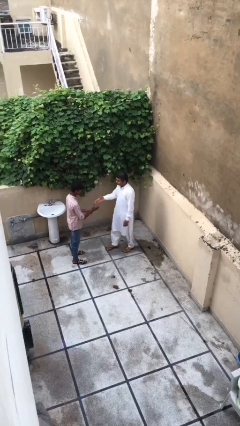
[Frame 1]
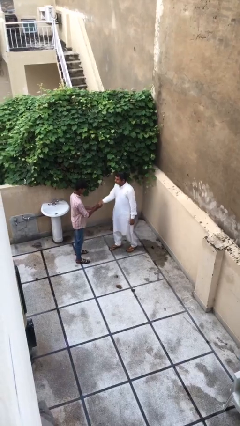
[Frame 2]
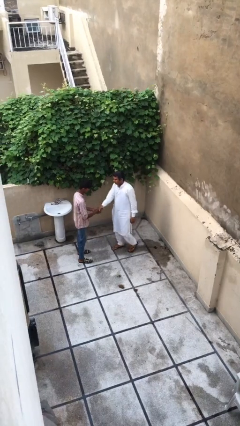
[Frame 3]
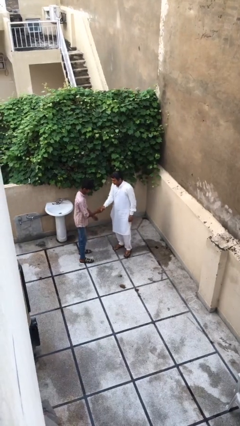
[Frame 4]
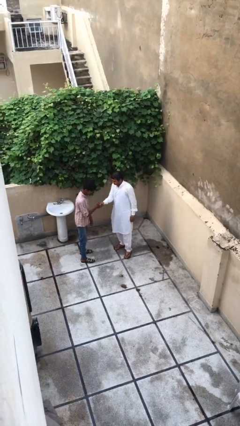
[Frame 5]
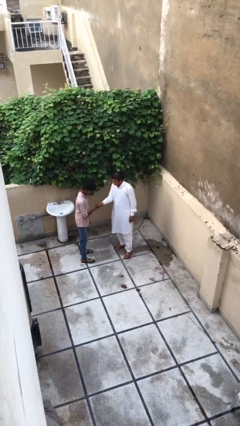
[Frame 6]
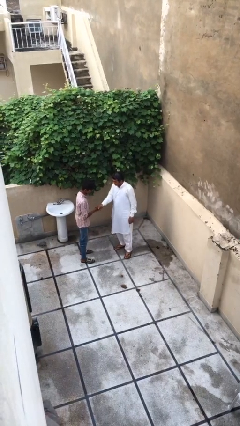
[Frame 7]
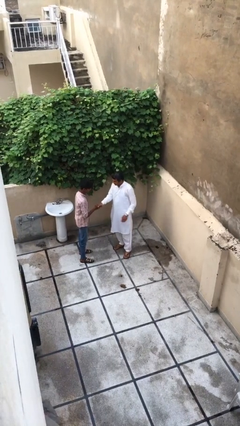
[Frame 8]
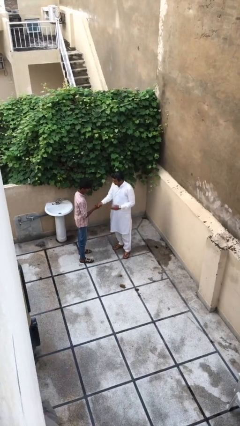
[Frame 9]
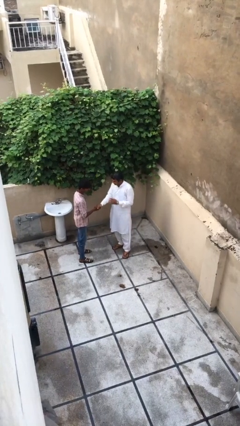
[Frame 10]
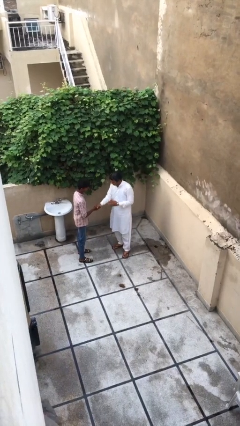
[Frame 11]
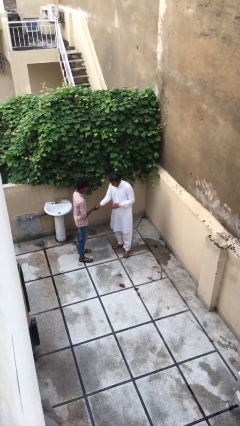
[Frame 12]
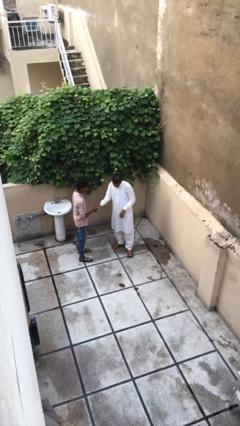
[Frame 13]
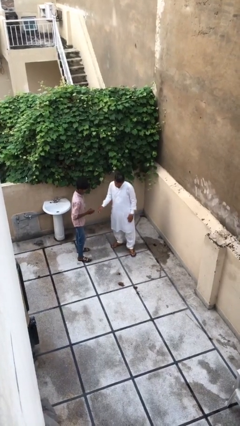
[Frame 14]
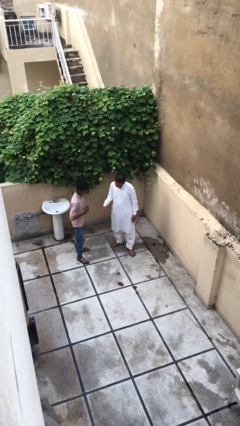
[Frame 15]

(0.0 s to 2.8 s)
person shakes hand

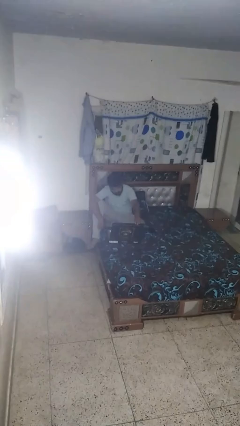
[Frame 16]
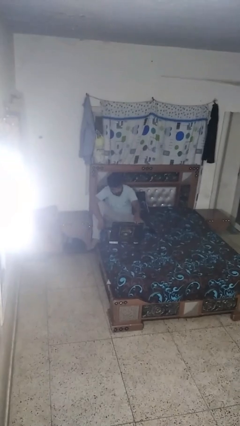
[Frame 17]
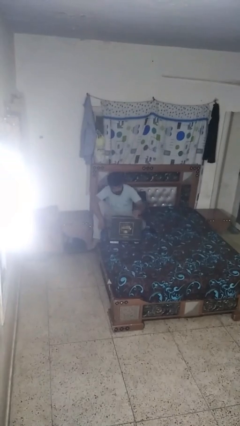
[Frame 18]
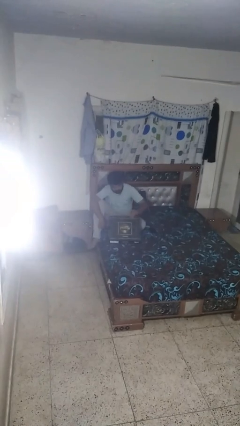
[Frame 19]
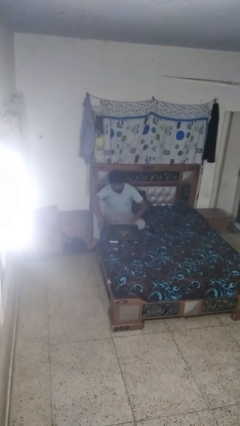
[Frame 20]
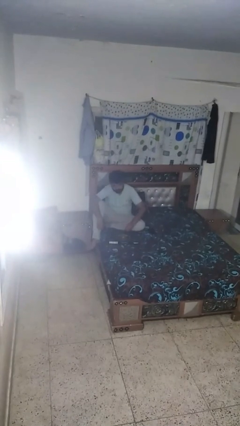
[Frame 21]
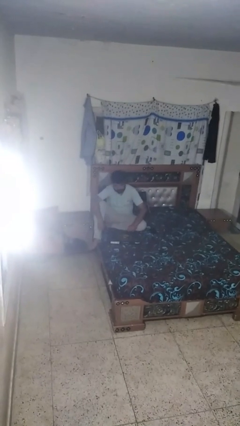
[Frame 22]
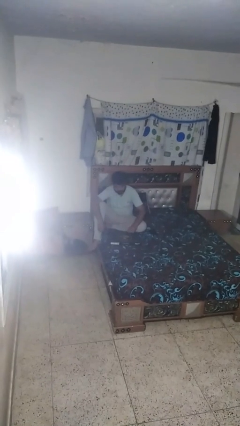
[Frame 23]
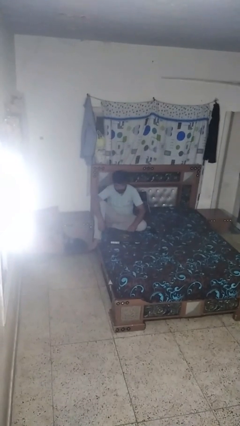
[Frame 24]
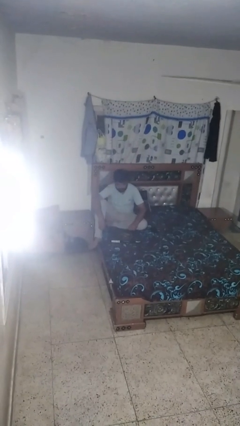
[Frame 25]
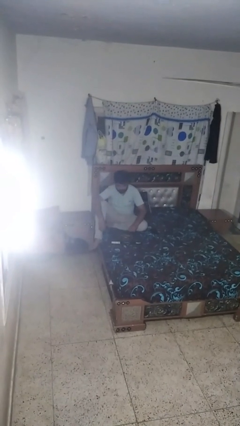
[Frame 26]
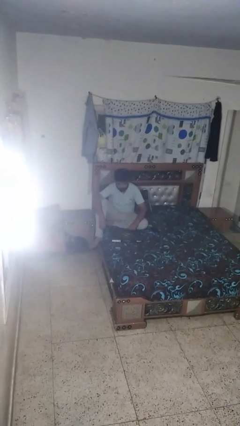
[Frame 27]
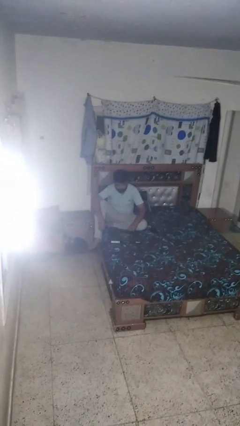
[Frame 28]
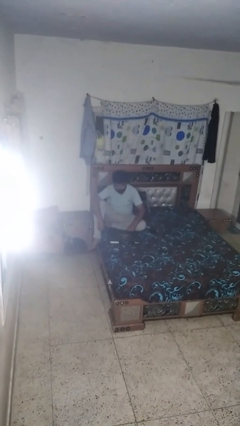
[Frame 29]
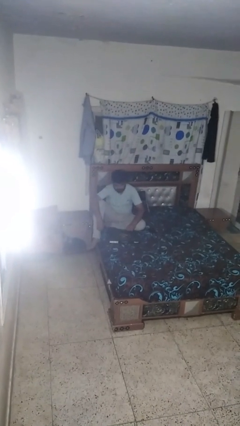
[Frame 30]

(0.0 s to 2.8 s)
person closes laptop

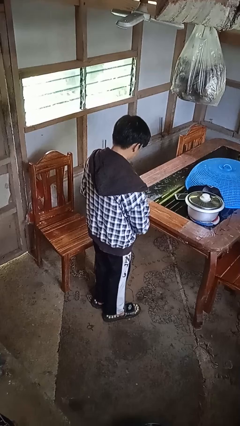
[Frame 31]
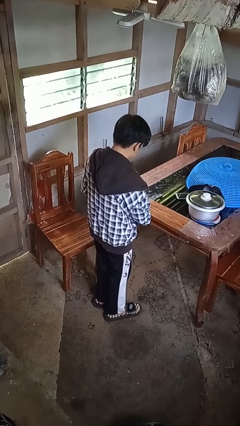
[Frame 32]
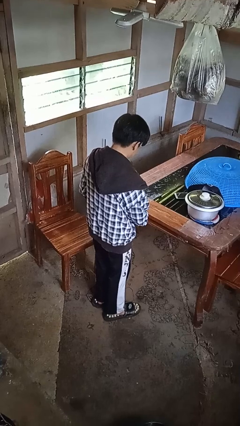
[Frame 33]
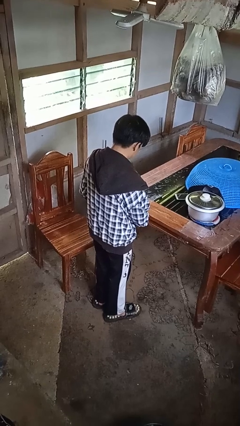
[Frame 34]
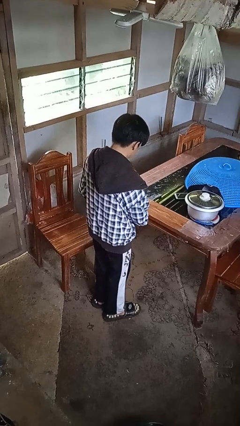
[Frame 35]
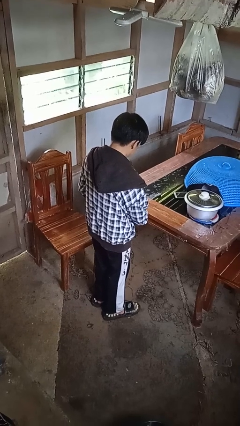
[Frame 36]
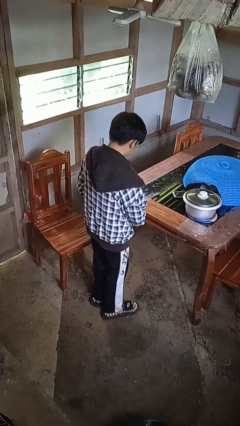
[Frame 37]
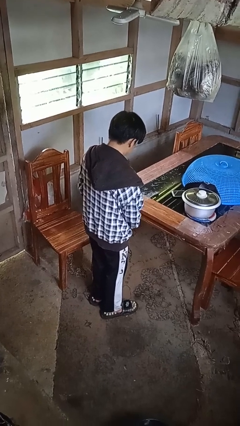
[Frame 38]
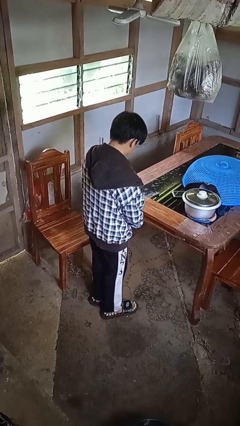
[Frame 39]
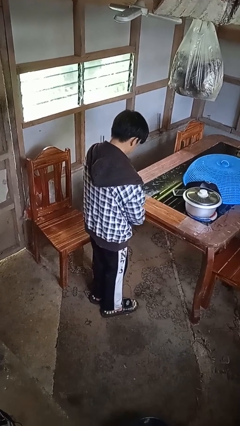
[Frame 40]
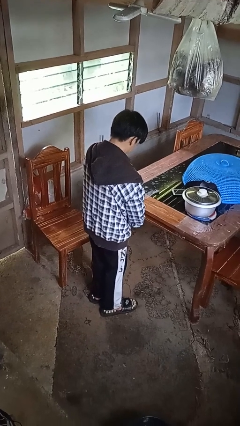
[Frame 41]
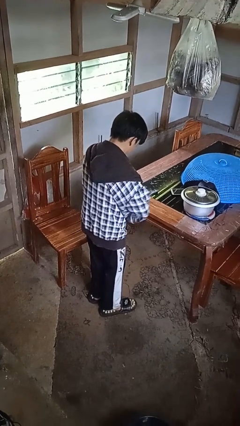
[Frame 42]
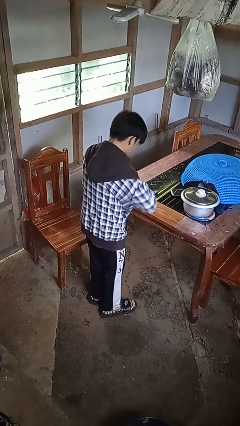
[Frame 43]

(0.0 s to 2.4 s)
person zips up jacket

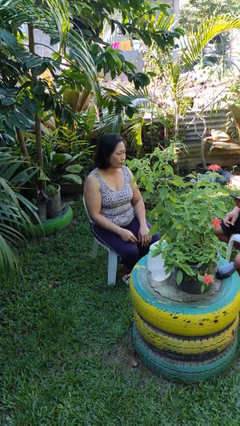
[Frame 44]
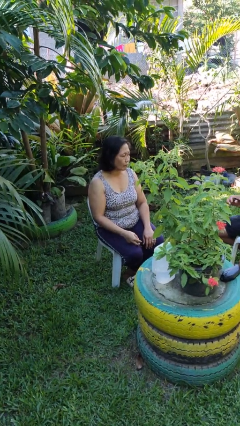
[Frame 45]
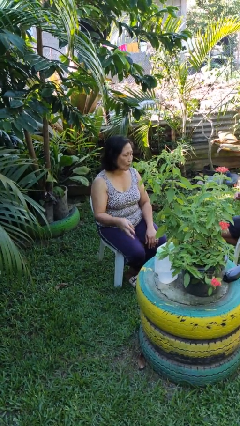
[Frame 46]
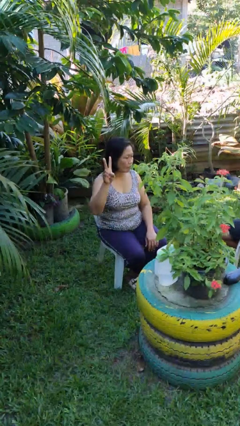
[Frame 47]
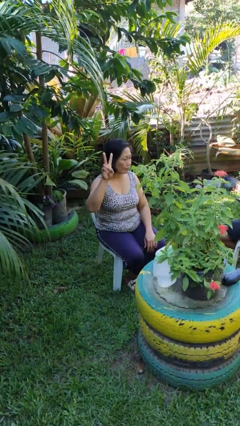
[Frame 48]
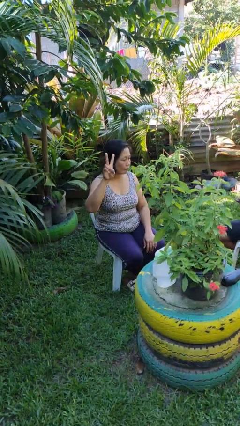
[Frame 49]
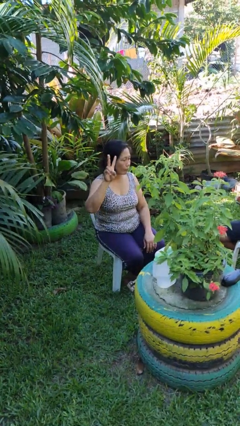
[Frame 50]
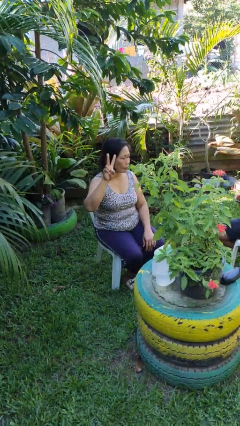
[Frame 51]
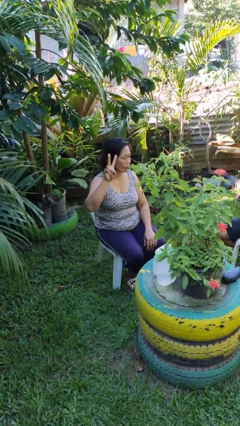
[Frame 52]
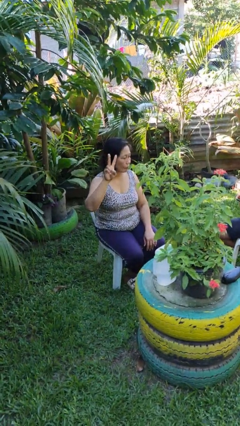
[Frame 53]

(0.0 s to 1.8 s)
person gestures peace

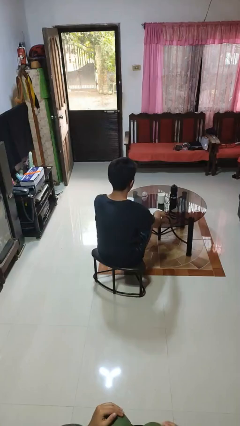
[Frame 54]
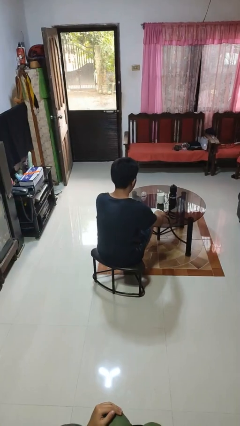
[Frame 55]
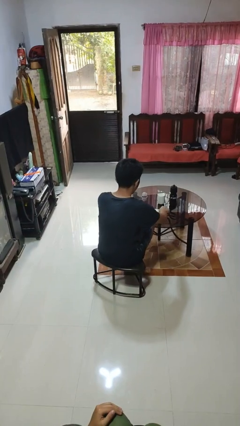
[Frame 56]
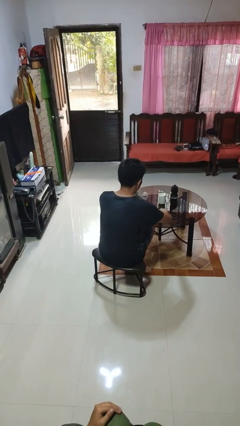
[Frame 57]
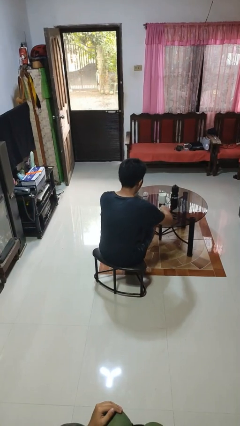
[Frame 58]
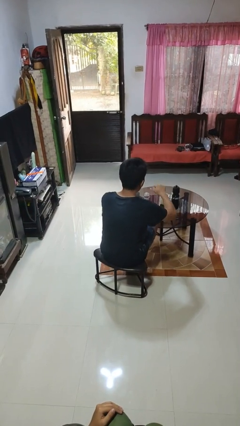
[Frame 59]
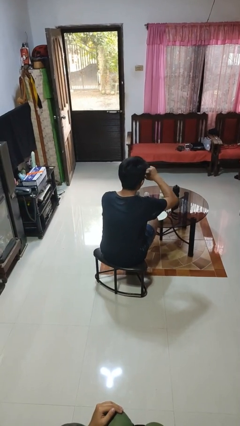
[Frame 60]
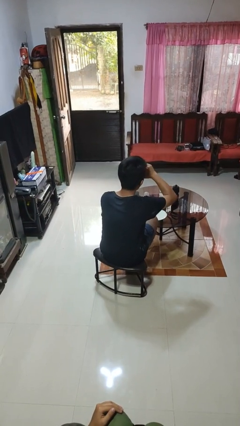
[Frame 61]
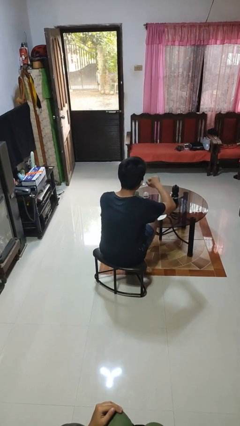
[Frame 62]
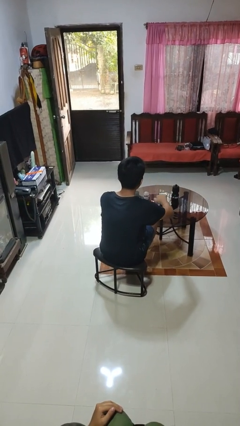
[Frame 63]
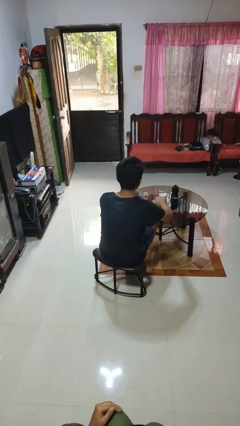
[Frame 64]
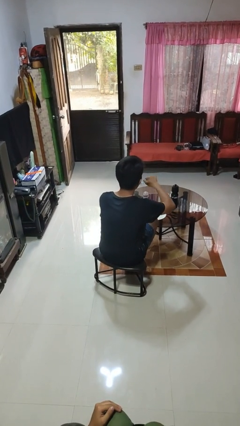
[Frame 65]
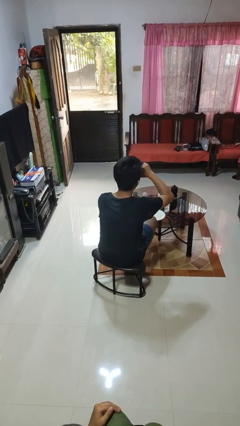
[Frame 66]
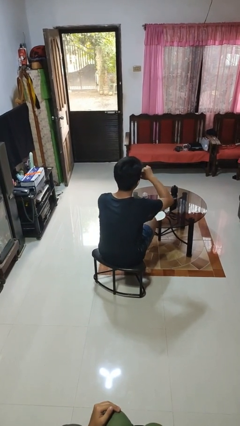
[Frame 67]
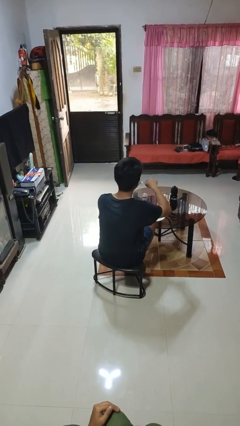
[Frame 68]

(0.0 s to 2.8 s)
person eats with utensil

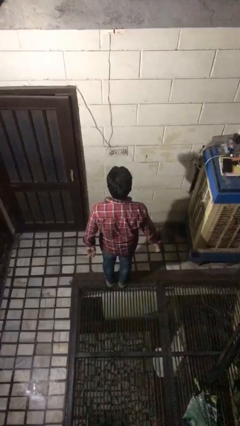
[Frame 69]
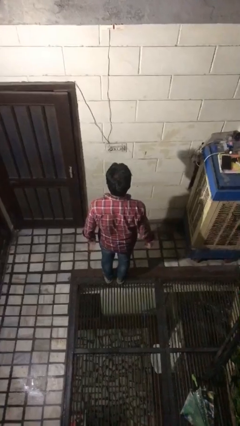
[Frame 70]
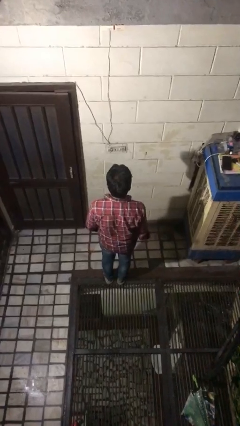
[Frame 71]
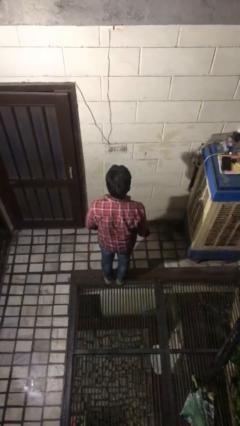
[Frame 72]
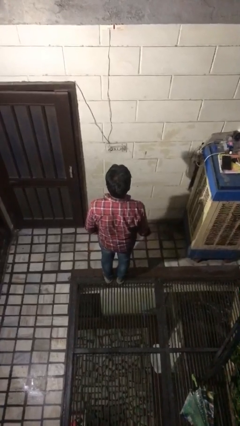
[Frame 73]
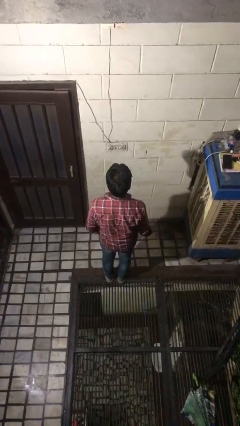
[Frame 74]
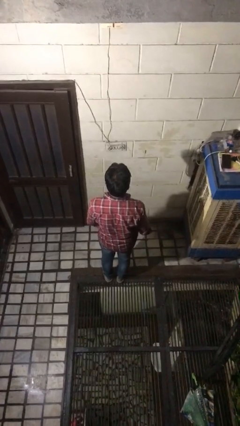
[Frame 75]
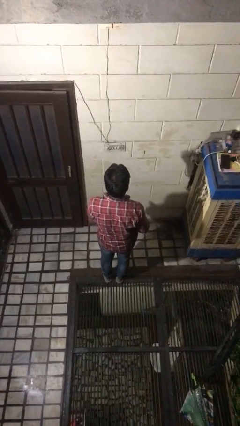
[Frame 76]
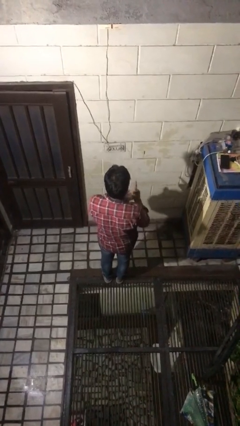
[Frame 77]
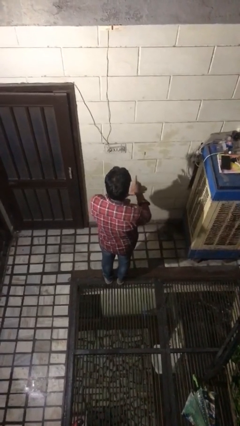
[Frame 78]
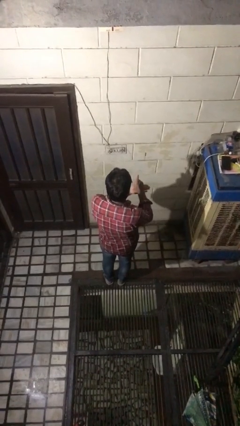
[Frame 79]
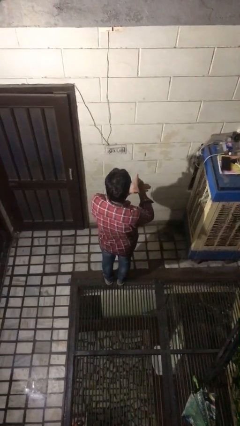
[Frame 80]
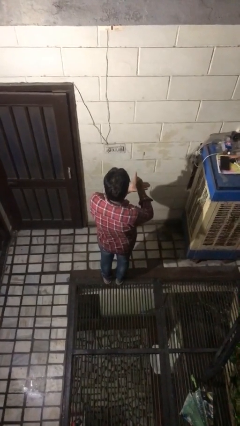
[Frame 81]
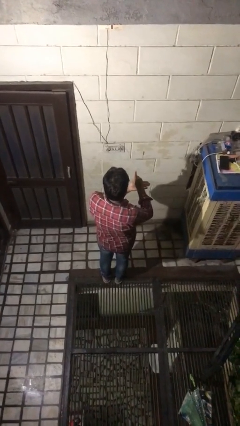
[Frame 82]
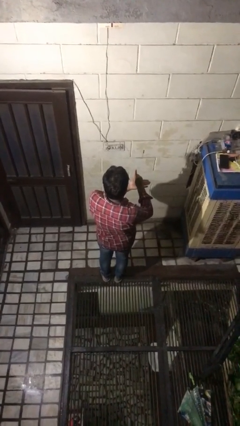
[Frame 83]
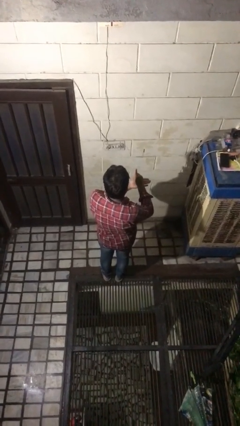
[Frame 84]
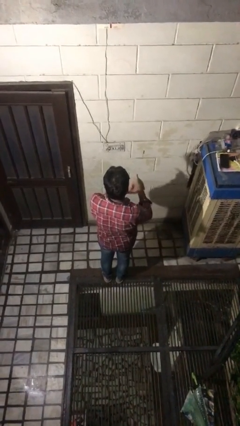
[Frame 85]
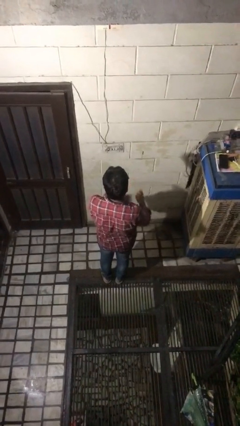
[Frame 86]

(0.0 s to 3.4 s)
person gestures number one

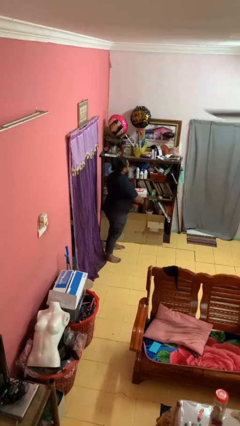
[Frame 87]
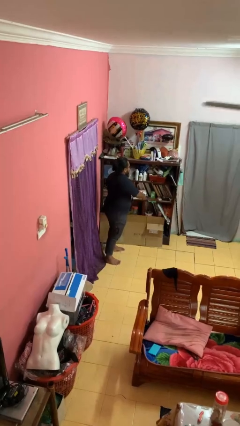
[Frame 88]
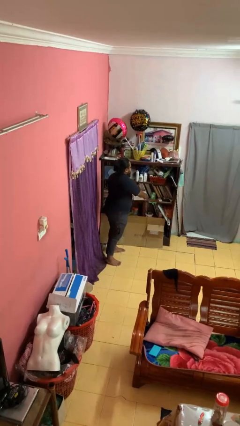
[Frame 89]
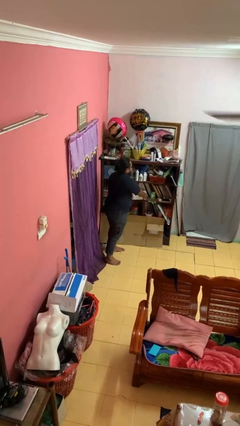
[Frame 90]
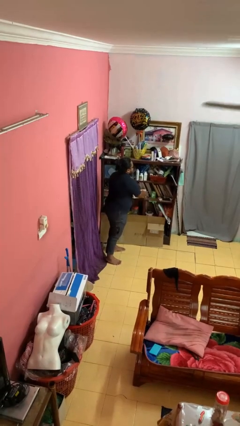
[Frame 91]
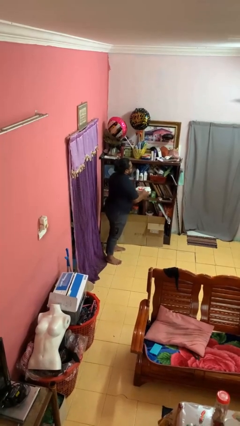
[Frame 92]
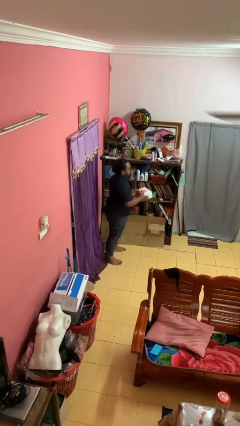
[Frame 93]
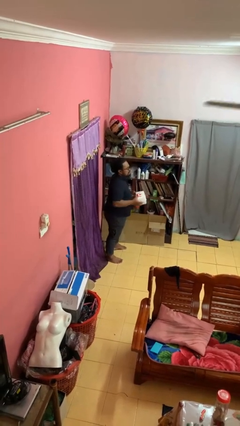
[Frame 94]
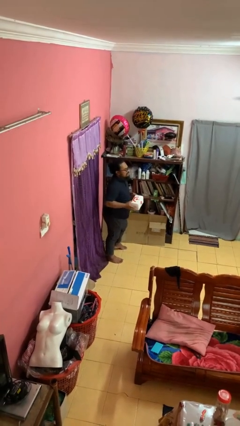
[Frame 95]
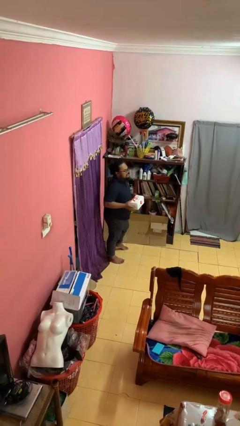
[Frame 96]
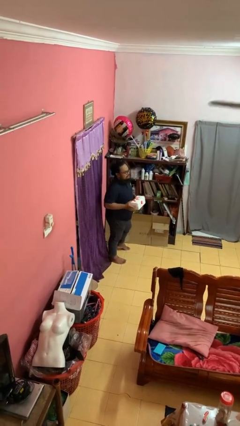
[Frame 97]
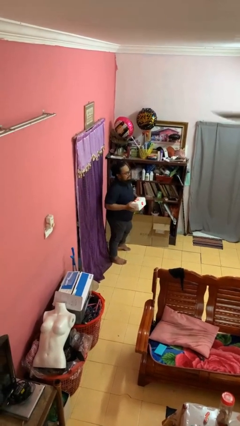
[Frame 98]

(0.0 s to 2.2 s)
person takes object from cabinet
